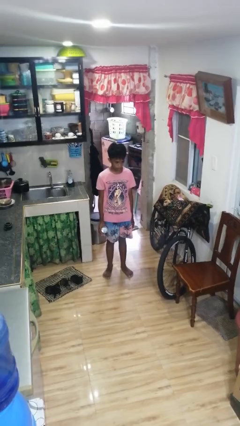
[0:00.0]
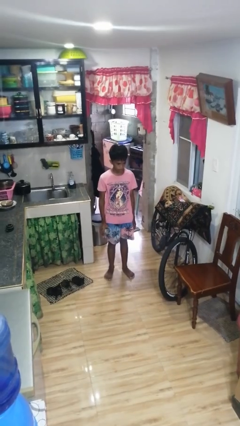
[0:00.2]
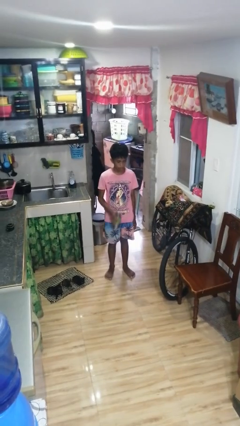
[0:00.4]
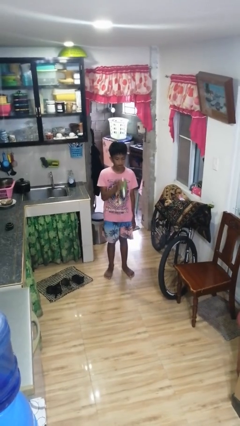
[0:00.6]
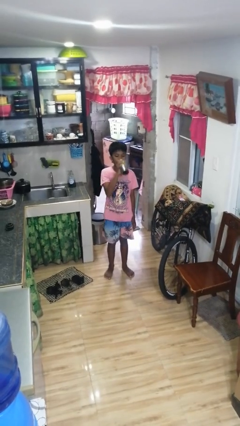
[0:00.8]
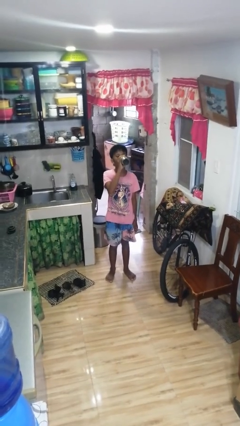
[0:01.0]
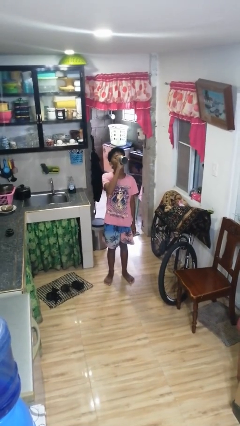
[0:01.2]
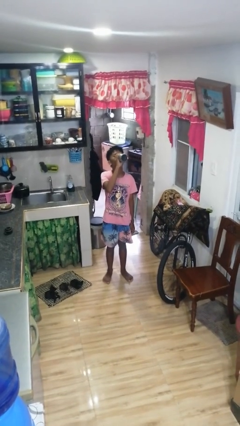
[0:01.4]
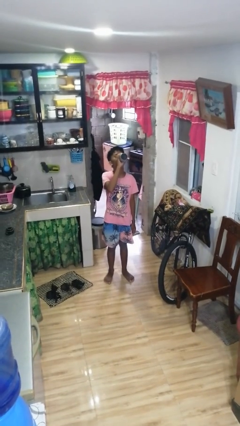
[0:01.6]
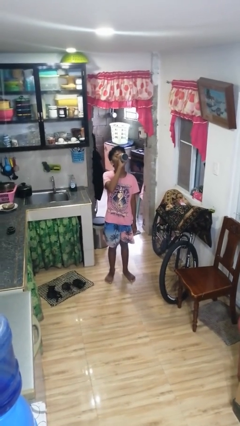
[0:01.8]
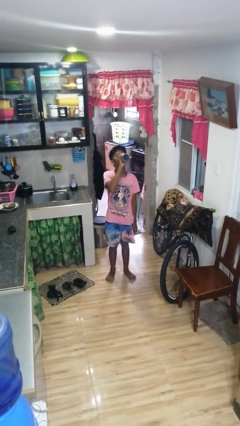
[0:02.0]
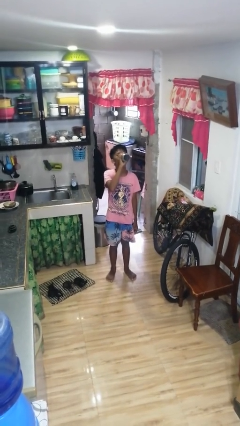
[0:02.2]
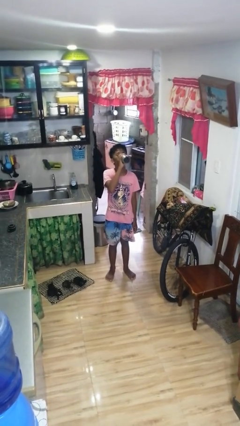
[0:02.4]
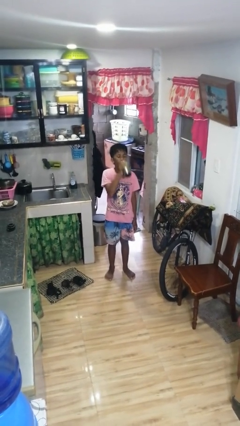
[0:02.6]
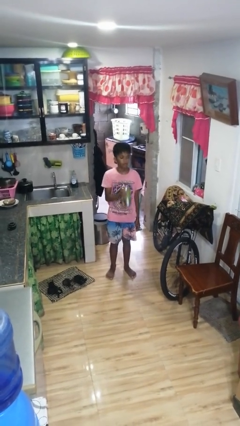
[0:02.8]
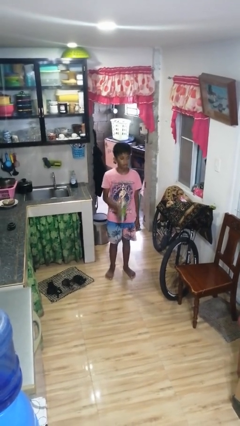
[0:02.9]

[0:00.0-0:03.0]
person drinks from bottle

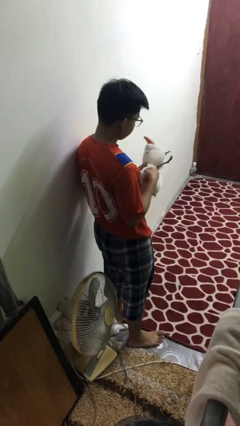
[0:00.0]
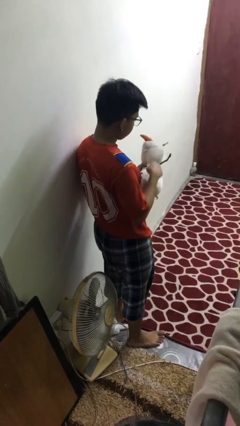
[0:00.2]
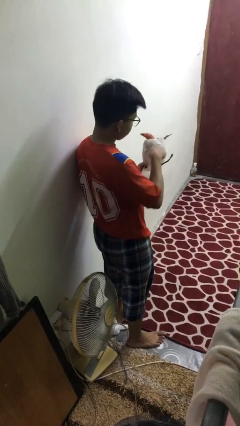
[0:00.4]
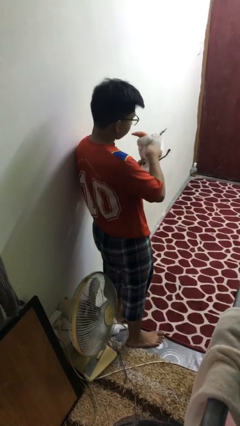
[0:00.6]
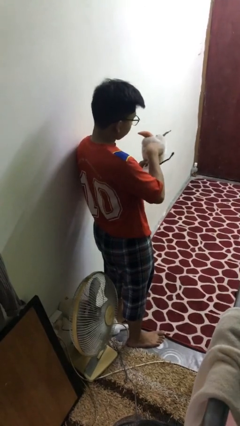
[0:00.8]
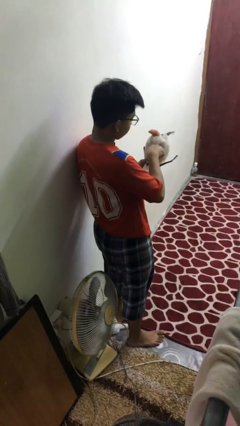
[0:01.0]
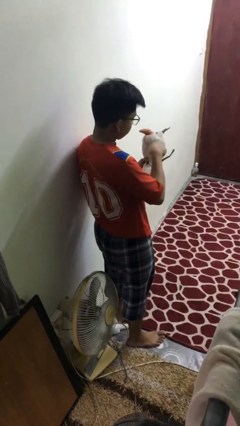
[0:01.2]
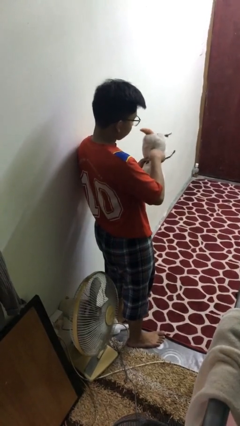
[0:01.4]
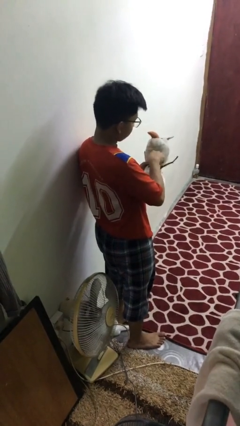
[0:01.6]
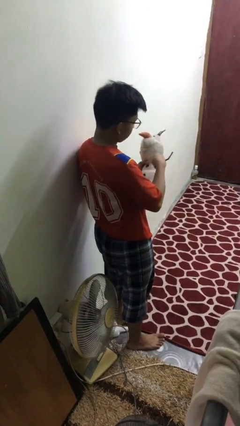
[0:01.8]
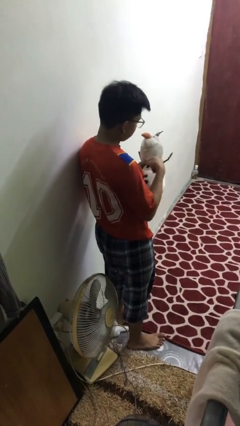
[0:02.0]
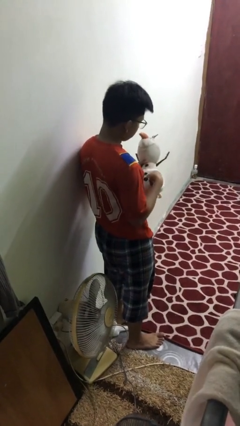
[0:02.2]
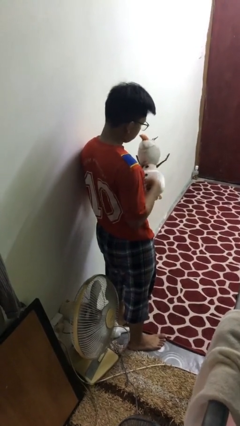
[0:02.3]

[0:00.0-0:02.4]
person taps object with finger

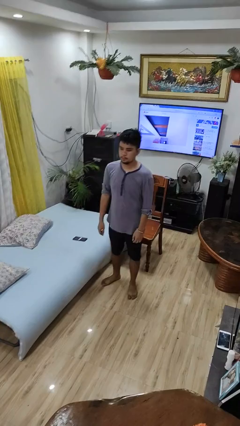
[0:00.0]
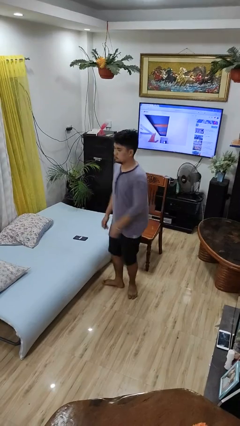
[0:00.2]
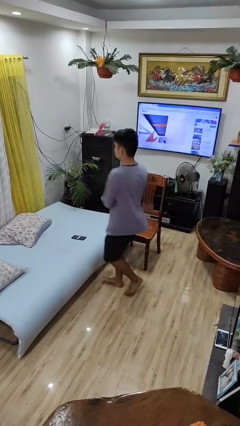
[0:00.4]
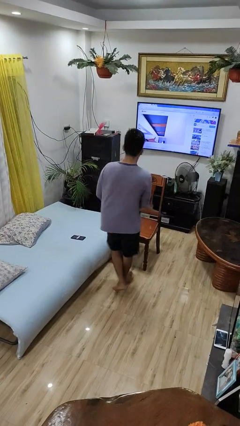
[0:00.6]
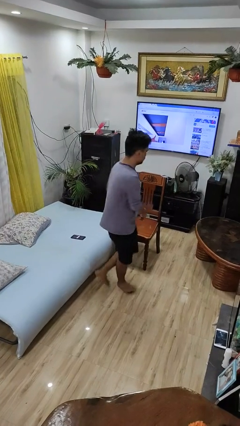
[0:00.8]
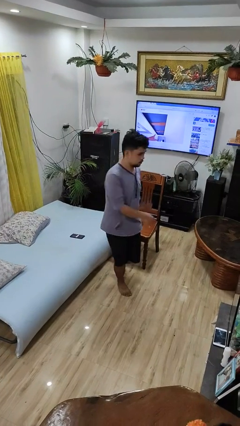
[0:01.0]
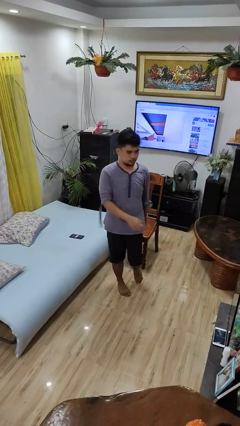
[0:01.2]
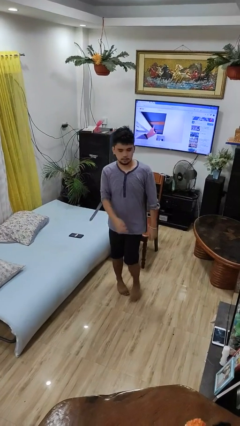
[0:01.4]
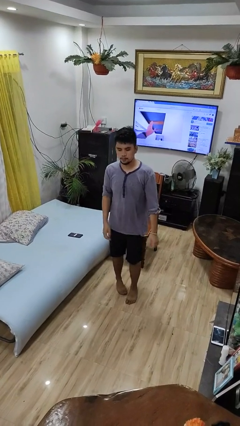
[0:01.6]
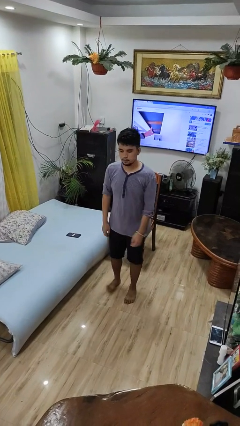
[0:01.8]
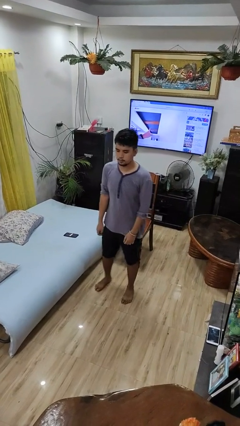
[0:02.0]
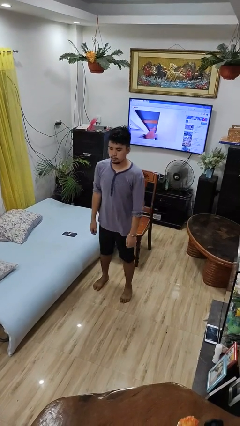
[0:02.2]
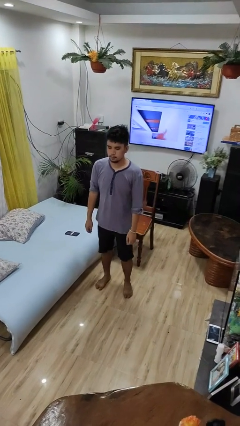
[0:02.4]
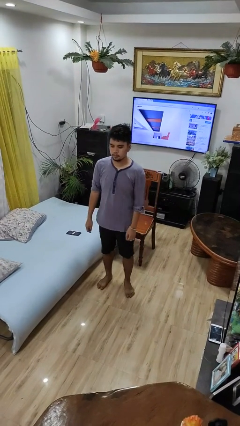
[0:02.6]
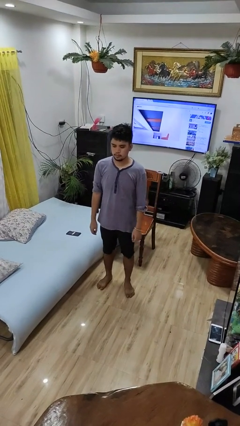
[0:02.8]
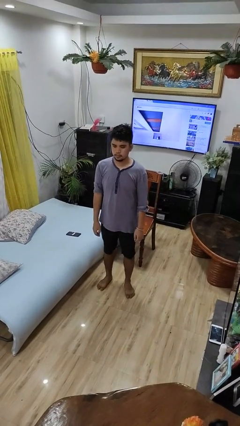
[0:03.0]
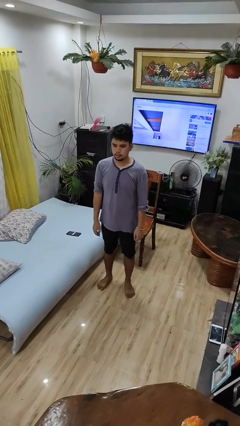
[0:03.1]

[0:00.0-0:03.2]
person twirls

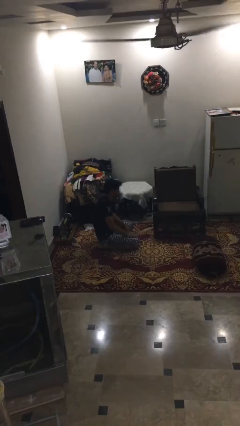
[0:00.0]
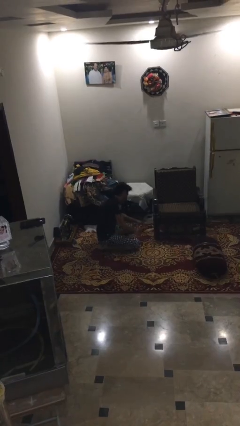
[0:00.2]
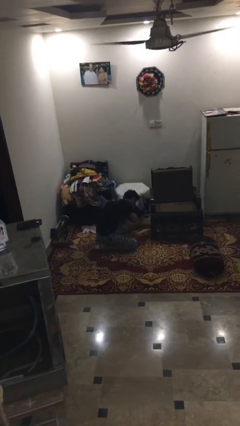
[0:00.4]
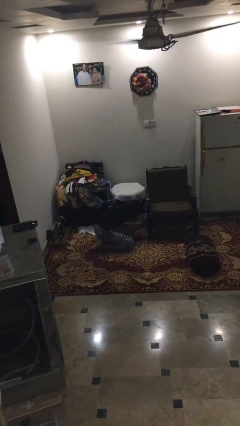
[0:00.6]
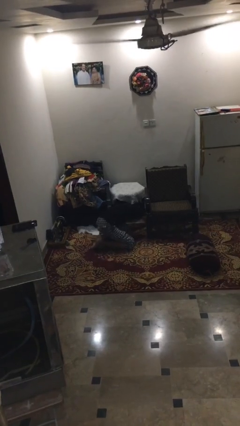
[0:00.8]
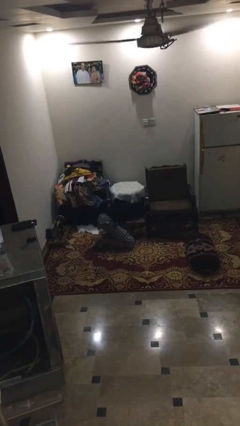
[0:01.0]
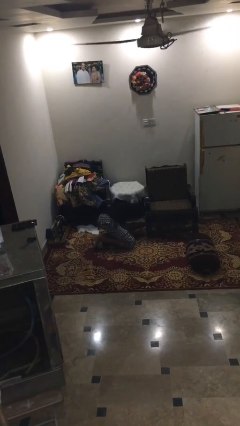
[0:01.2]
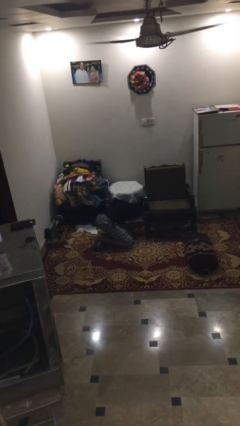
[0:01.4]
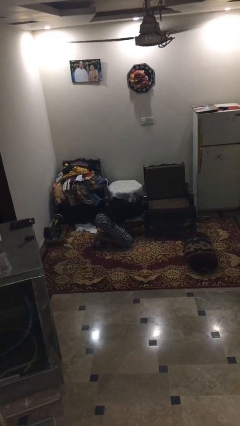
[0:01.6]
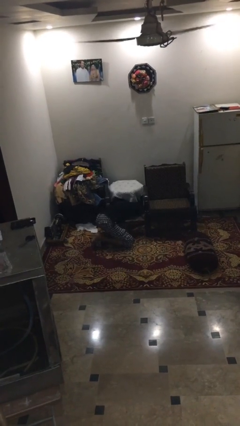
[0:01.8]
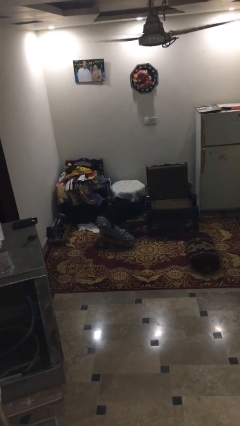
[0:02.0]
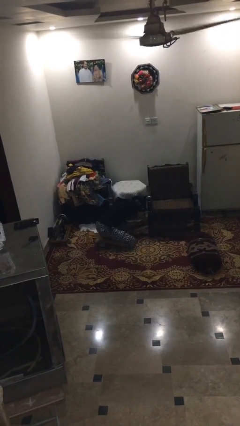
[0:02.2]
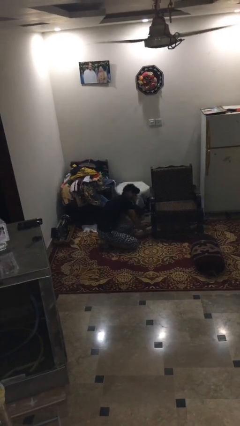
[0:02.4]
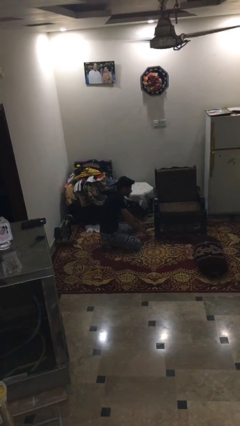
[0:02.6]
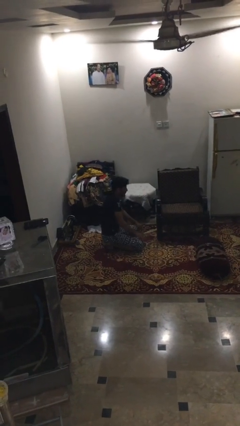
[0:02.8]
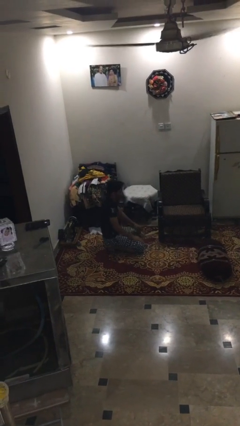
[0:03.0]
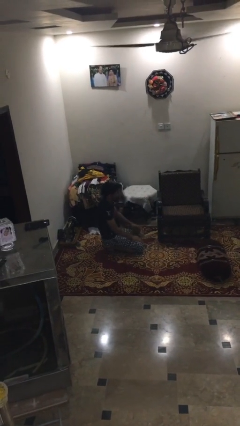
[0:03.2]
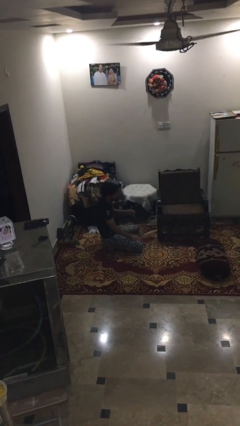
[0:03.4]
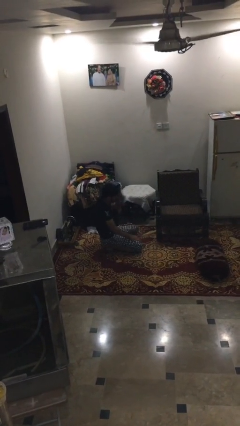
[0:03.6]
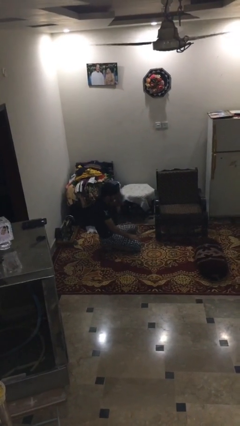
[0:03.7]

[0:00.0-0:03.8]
person searches in couch
